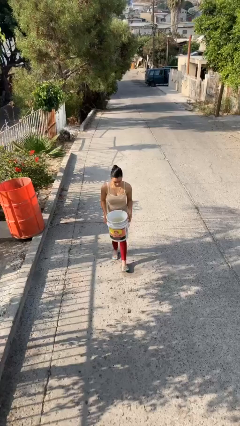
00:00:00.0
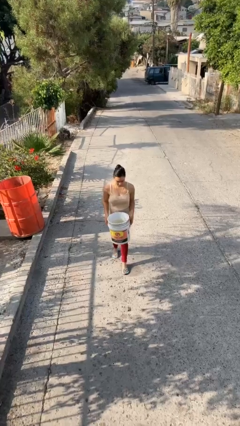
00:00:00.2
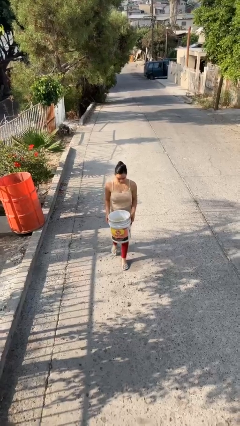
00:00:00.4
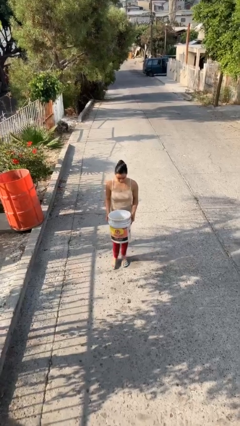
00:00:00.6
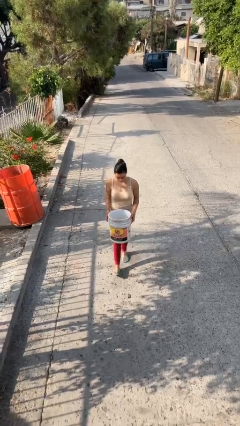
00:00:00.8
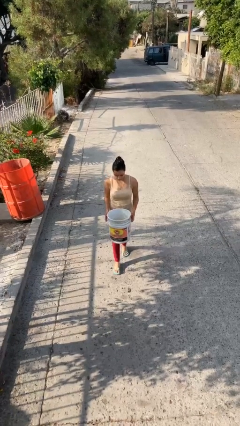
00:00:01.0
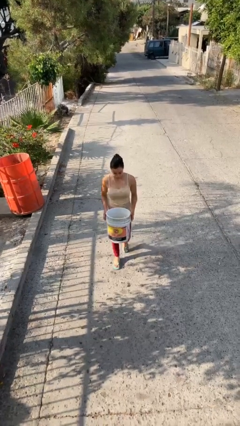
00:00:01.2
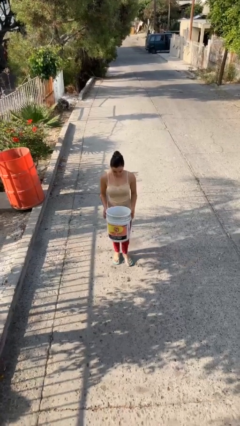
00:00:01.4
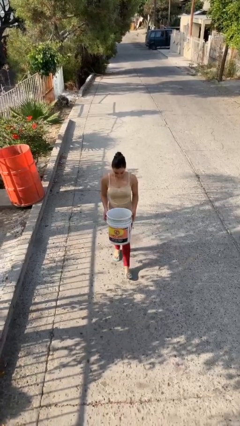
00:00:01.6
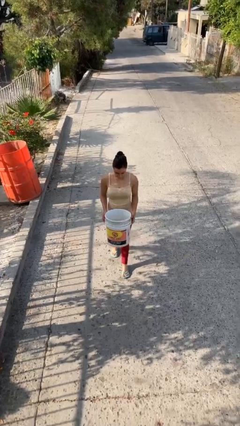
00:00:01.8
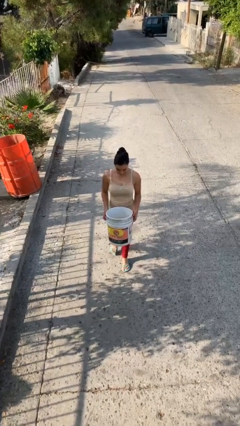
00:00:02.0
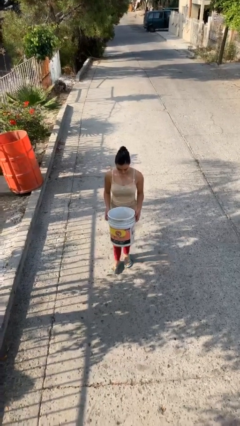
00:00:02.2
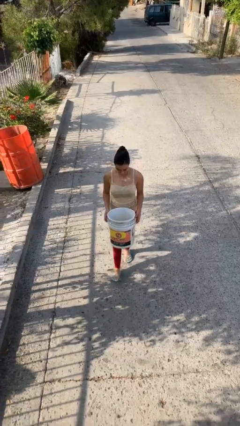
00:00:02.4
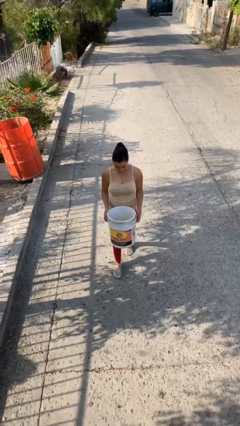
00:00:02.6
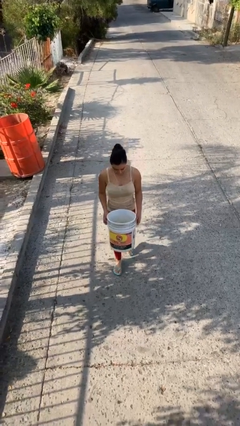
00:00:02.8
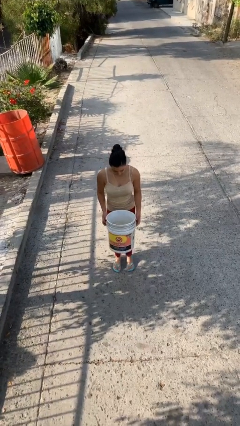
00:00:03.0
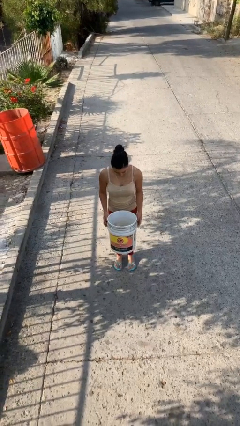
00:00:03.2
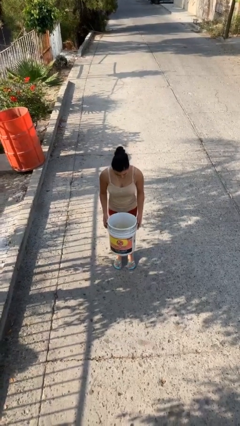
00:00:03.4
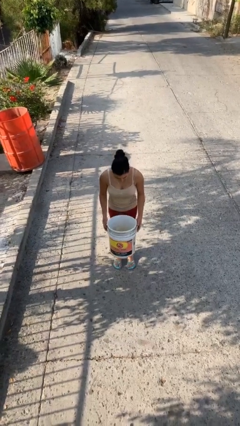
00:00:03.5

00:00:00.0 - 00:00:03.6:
person carries heavy object

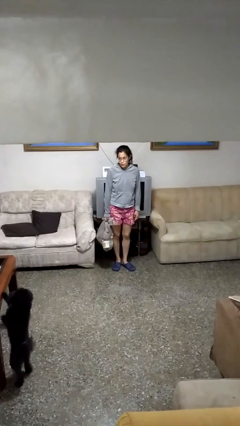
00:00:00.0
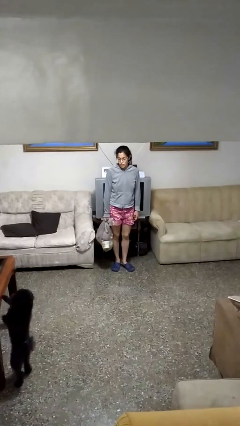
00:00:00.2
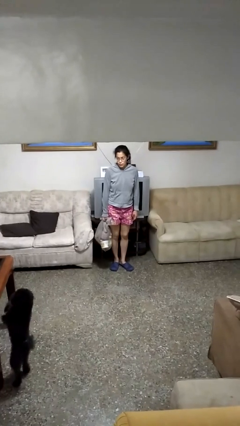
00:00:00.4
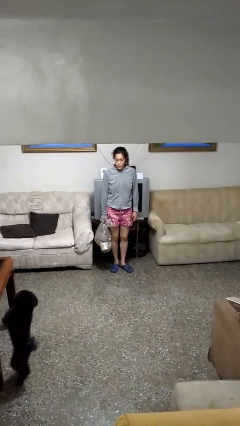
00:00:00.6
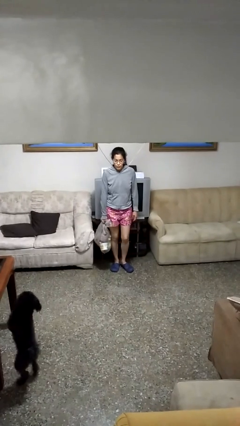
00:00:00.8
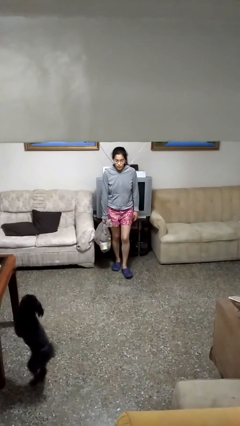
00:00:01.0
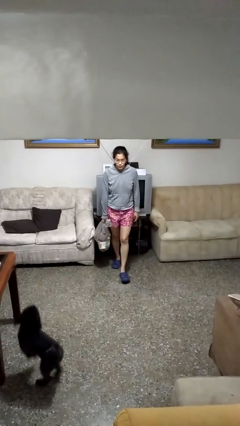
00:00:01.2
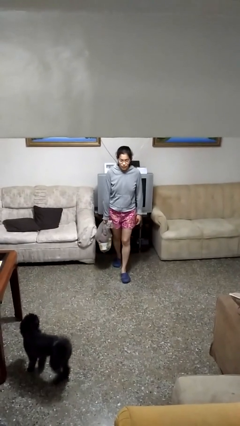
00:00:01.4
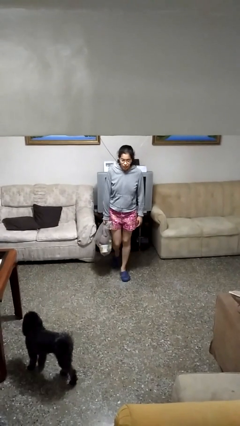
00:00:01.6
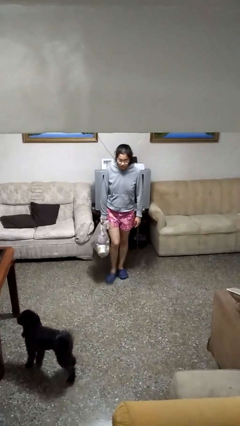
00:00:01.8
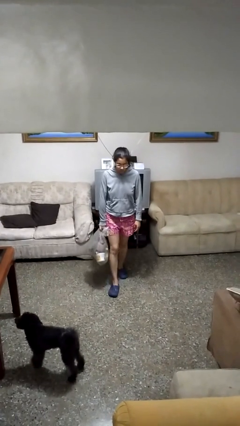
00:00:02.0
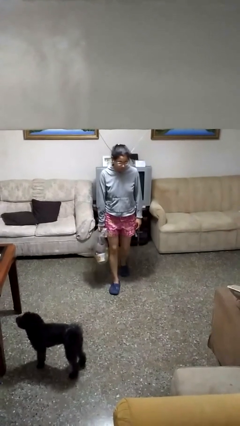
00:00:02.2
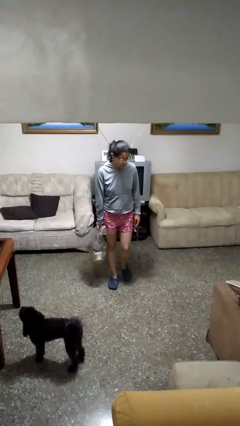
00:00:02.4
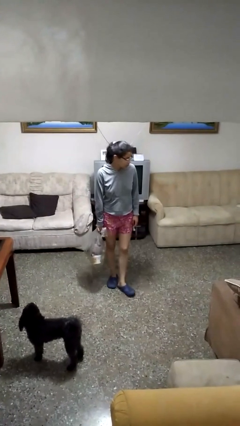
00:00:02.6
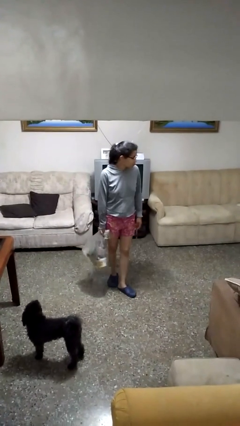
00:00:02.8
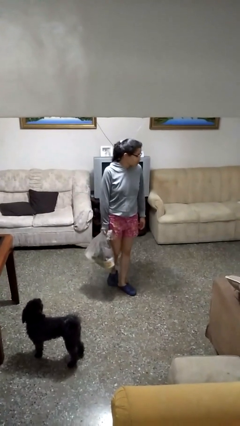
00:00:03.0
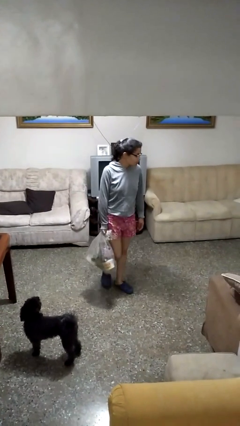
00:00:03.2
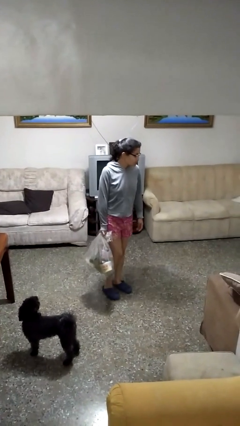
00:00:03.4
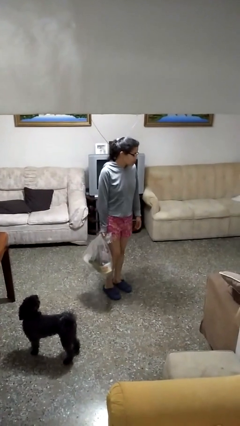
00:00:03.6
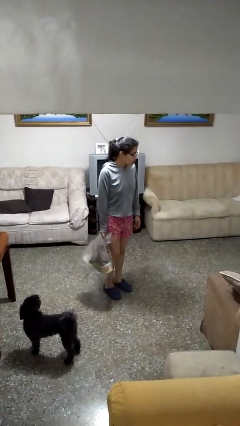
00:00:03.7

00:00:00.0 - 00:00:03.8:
person carries groceries

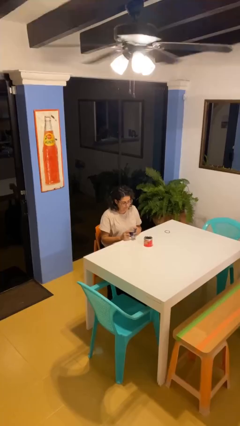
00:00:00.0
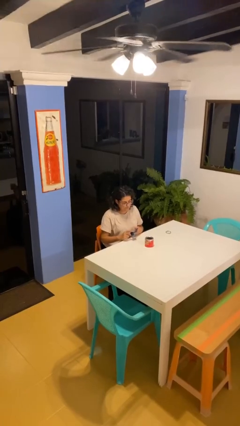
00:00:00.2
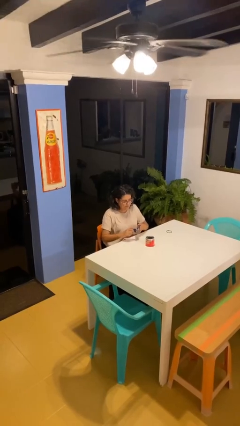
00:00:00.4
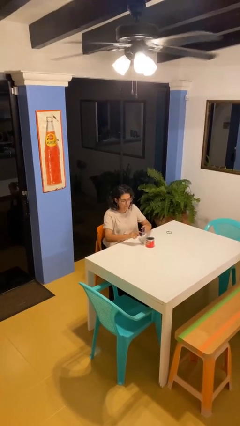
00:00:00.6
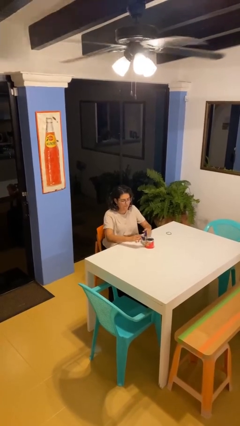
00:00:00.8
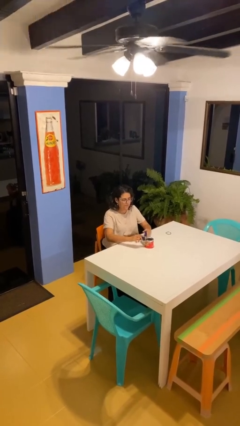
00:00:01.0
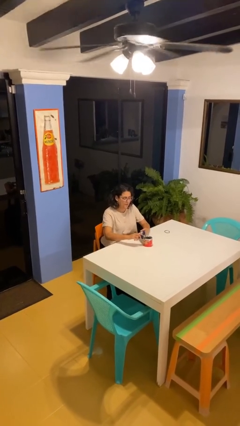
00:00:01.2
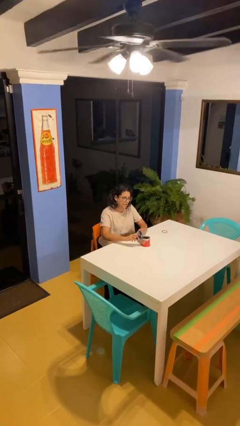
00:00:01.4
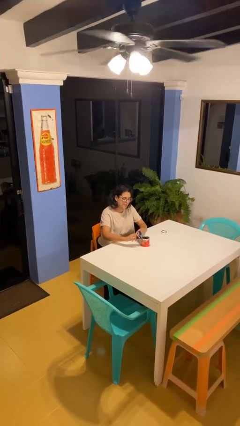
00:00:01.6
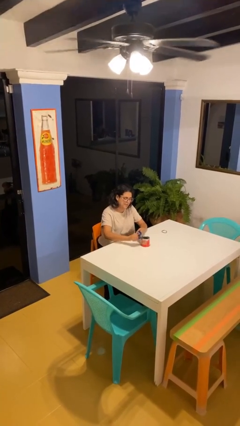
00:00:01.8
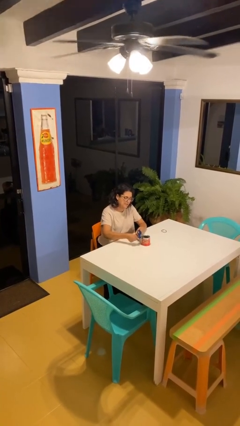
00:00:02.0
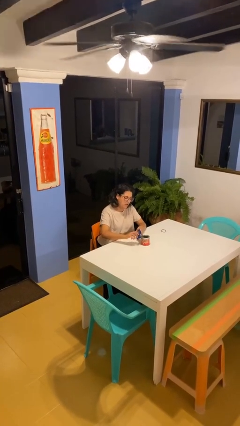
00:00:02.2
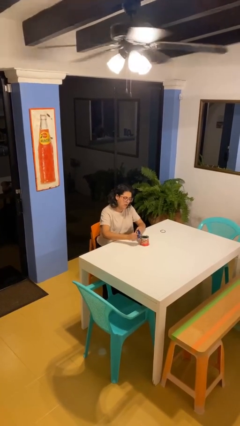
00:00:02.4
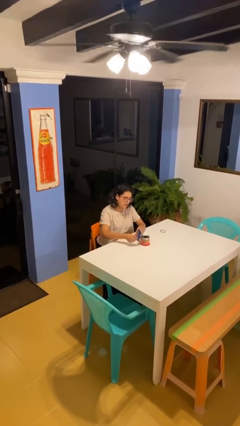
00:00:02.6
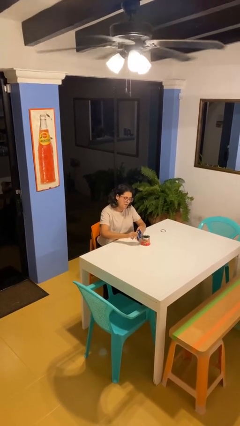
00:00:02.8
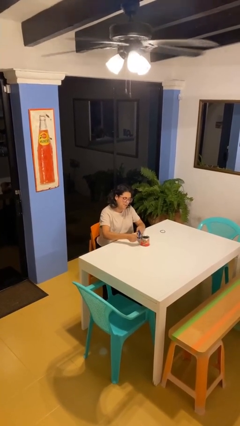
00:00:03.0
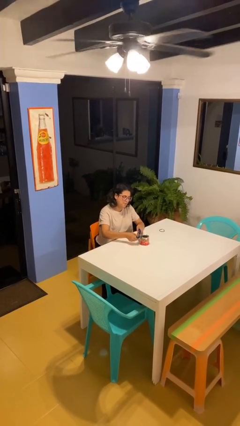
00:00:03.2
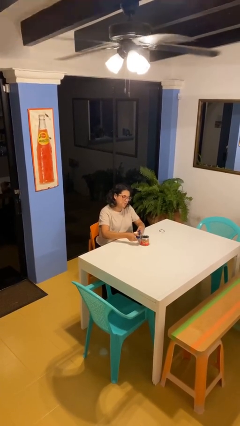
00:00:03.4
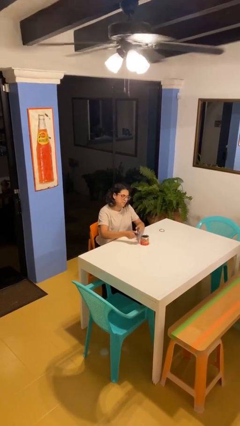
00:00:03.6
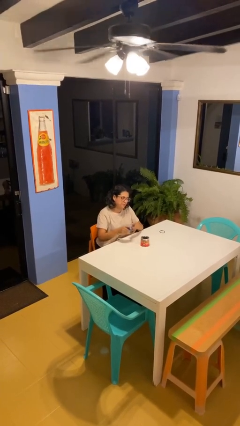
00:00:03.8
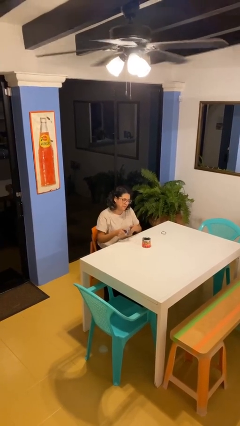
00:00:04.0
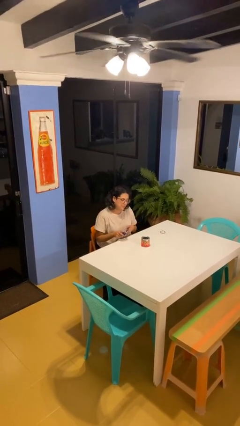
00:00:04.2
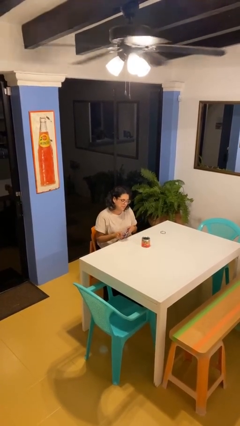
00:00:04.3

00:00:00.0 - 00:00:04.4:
person opens can with can opener

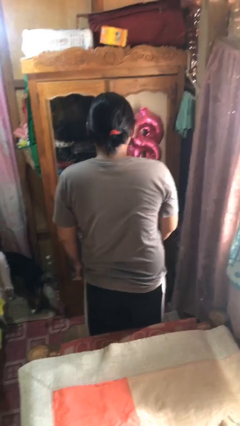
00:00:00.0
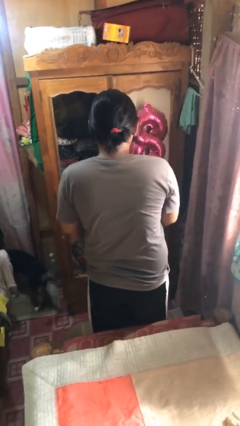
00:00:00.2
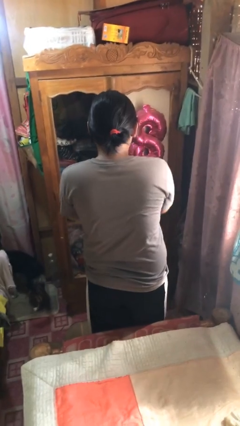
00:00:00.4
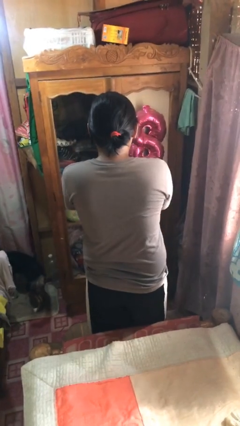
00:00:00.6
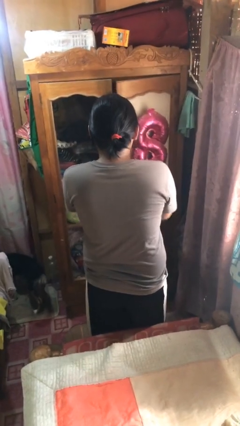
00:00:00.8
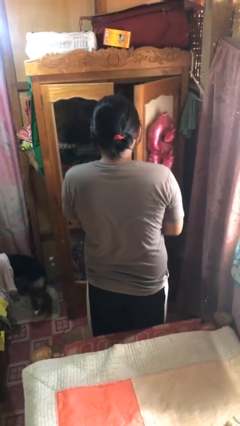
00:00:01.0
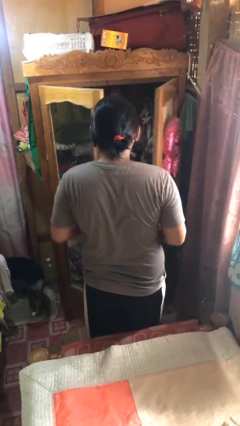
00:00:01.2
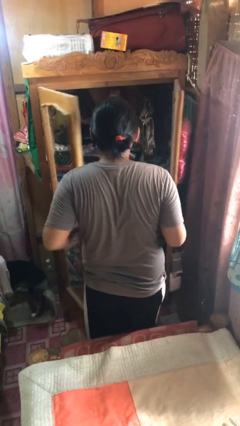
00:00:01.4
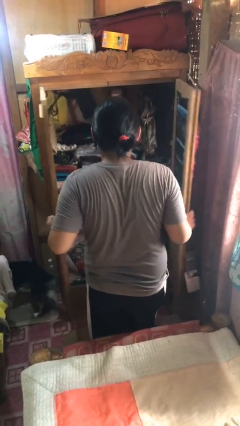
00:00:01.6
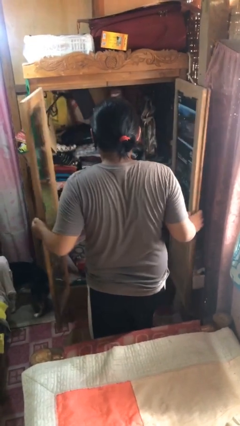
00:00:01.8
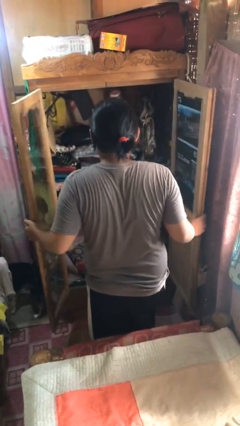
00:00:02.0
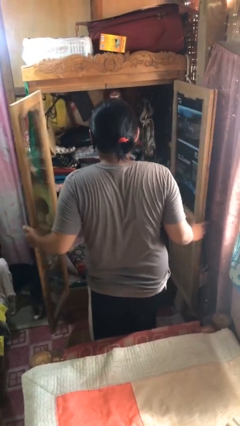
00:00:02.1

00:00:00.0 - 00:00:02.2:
person opens closet door

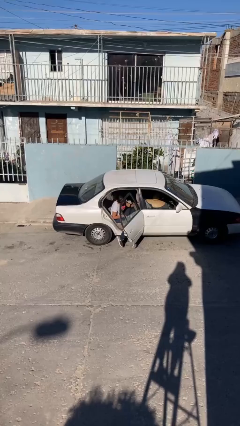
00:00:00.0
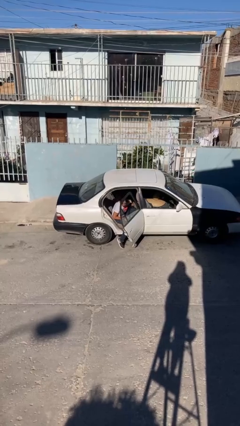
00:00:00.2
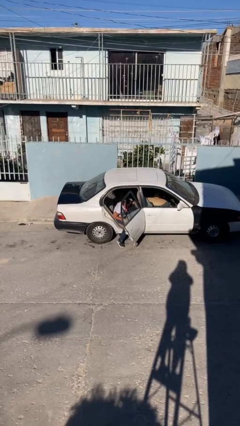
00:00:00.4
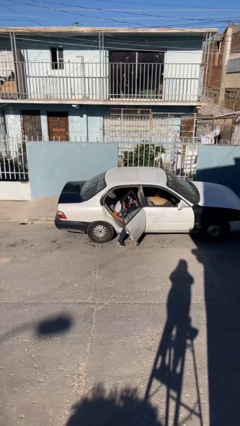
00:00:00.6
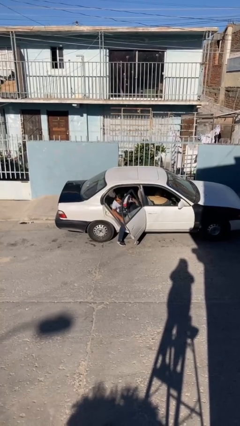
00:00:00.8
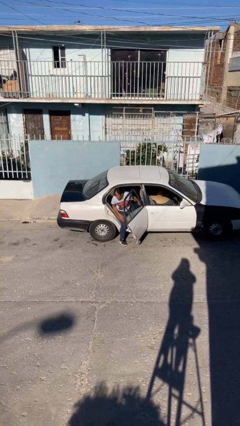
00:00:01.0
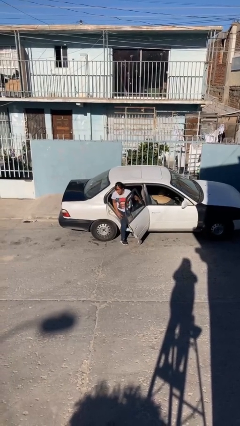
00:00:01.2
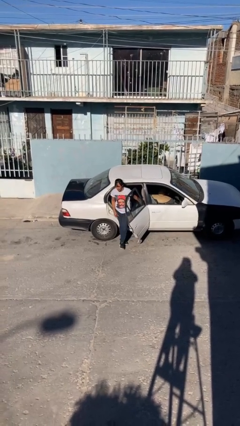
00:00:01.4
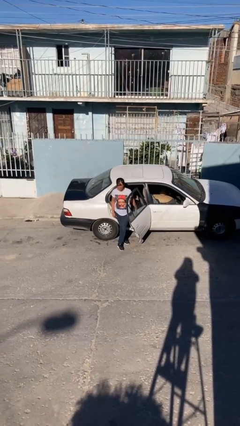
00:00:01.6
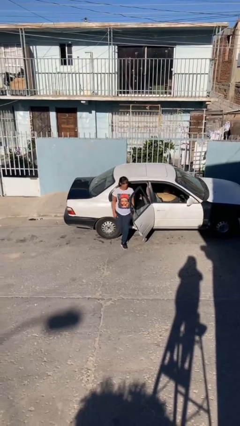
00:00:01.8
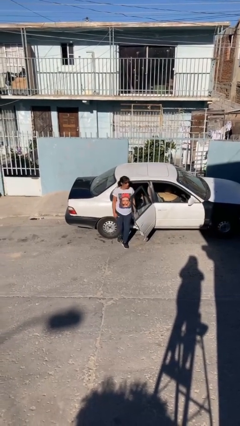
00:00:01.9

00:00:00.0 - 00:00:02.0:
person exits car

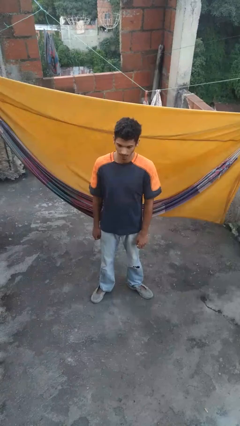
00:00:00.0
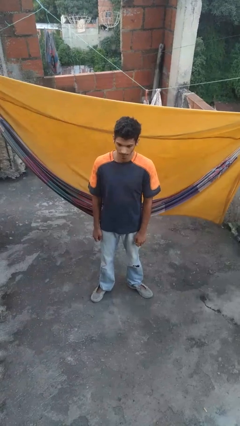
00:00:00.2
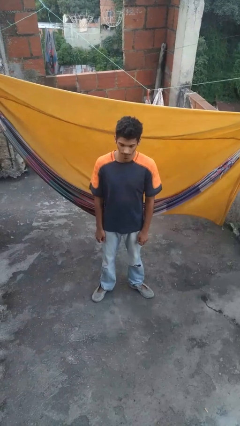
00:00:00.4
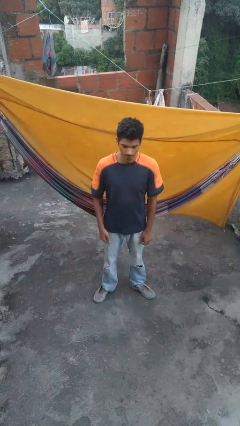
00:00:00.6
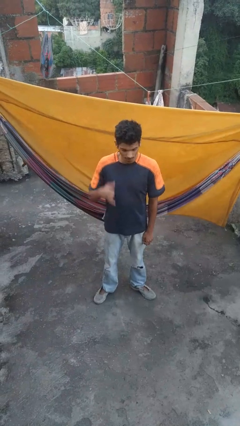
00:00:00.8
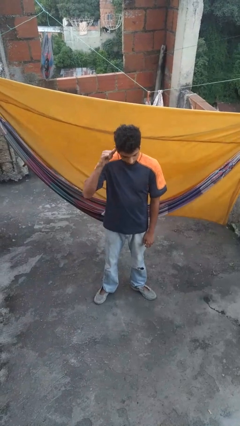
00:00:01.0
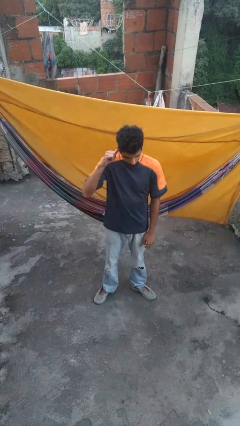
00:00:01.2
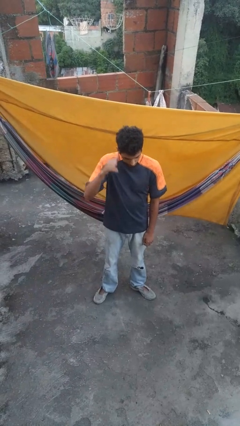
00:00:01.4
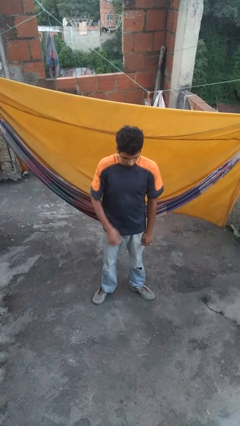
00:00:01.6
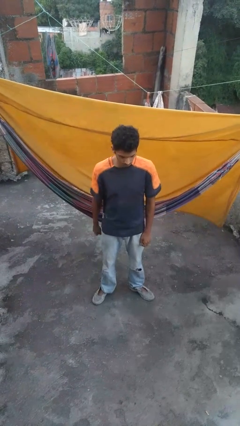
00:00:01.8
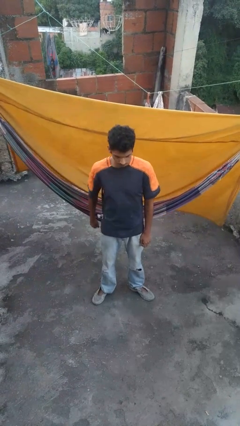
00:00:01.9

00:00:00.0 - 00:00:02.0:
person gestures call me
